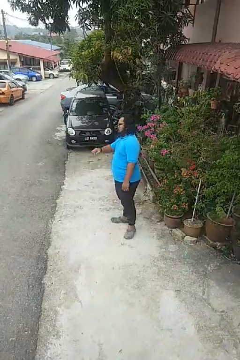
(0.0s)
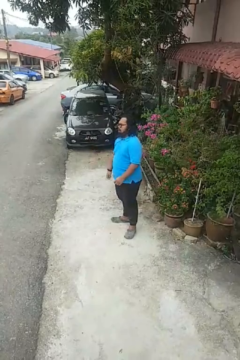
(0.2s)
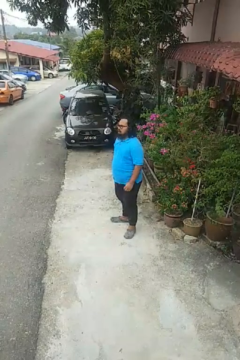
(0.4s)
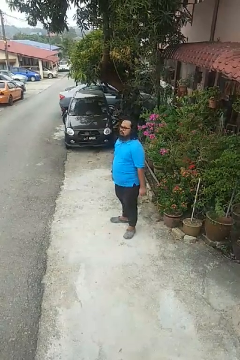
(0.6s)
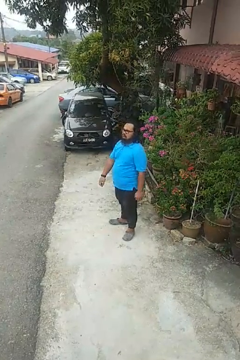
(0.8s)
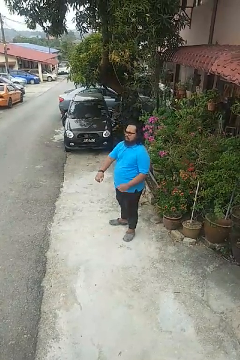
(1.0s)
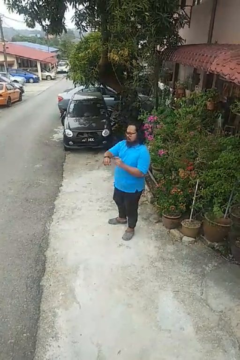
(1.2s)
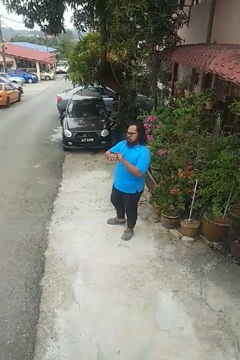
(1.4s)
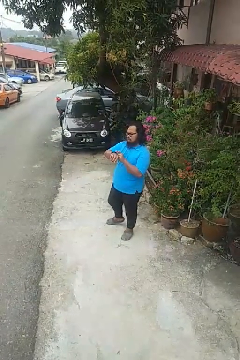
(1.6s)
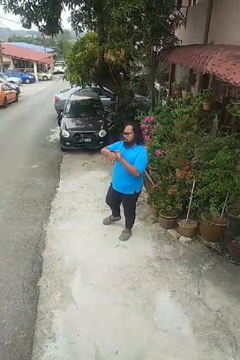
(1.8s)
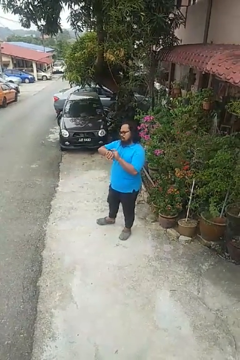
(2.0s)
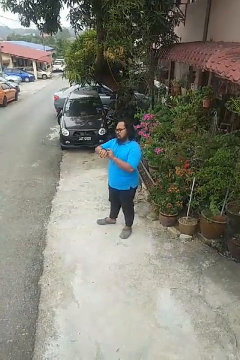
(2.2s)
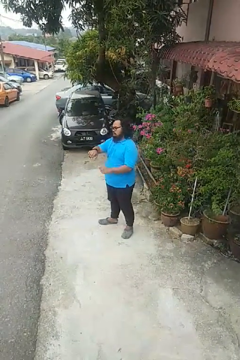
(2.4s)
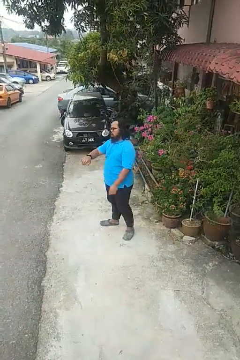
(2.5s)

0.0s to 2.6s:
person looks at wristwatch

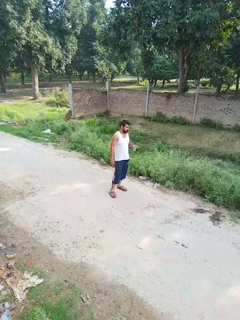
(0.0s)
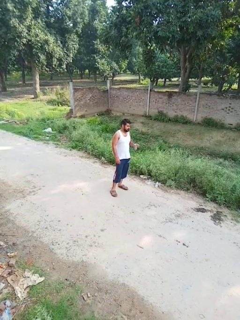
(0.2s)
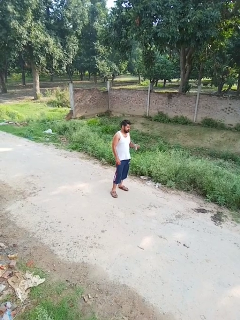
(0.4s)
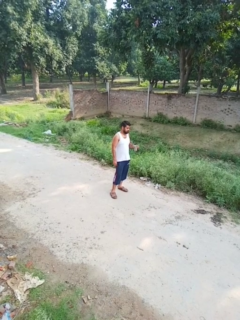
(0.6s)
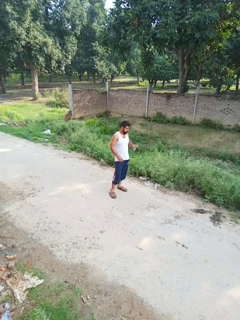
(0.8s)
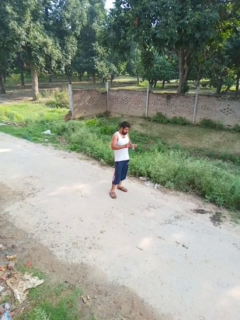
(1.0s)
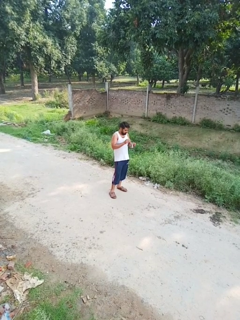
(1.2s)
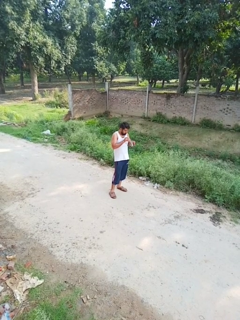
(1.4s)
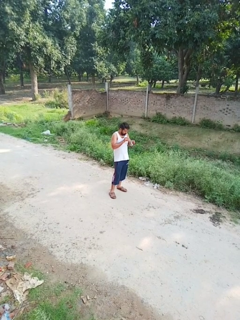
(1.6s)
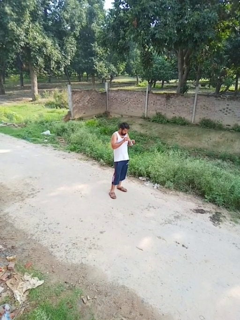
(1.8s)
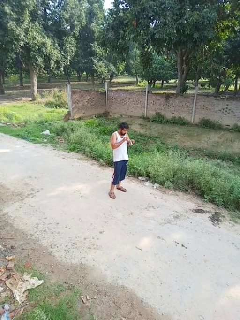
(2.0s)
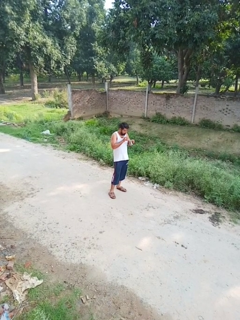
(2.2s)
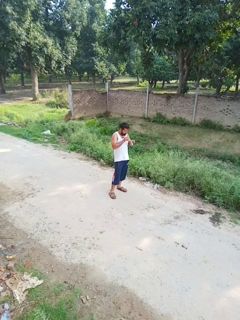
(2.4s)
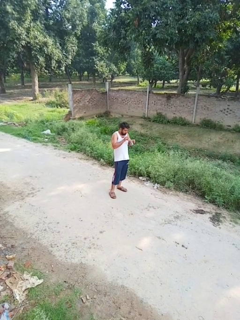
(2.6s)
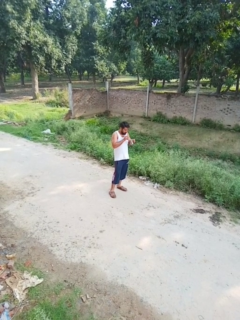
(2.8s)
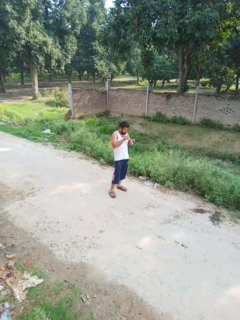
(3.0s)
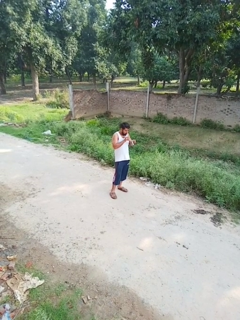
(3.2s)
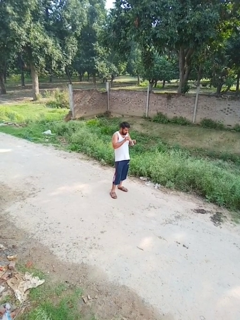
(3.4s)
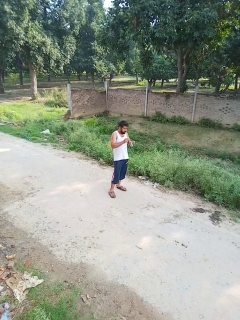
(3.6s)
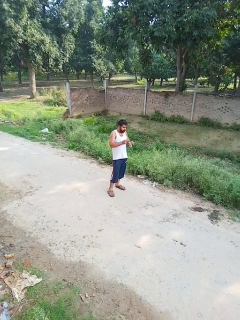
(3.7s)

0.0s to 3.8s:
person drinks from straw

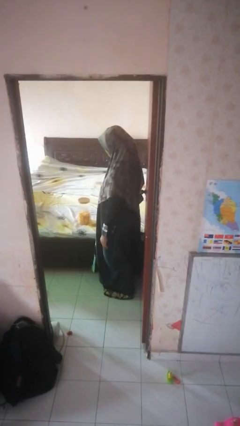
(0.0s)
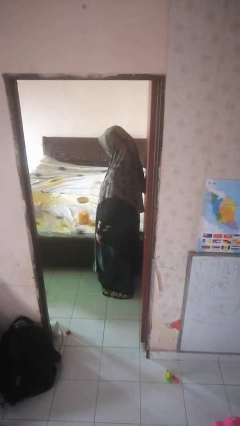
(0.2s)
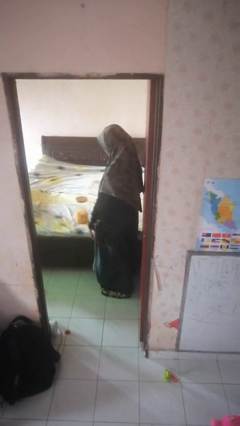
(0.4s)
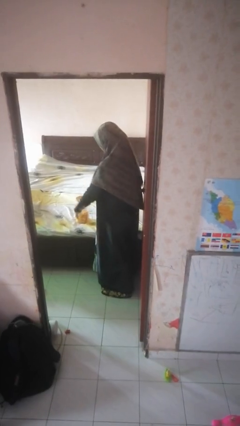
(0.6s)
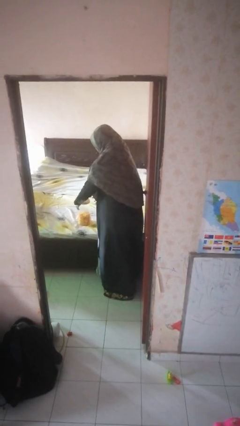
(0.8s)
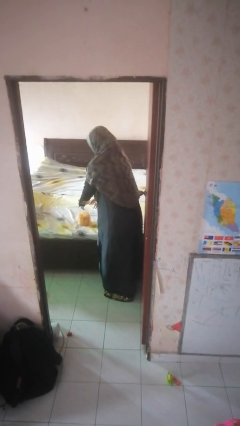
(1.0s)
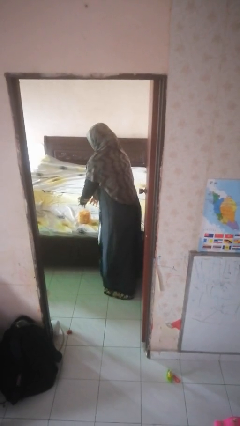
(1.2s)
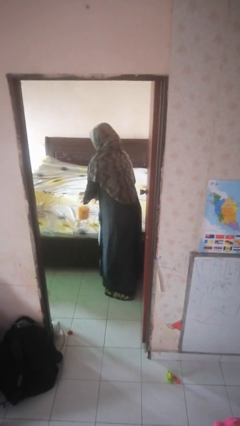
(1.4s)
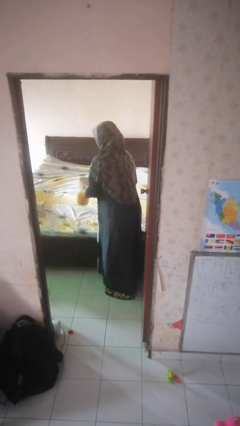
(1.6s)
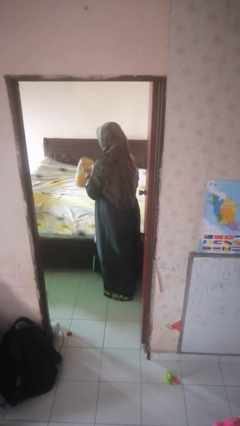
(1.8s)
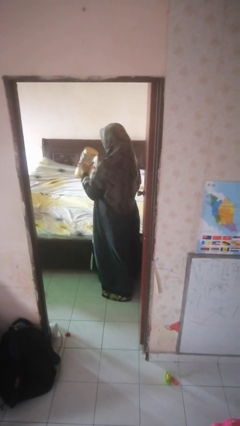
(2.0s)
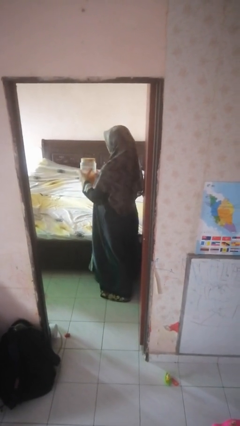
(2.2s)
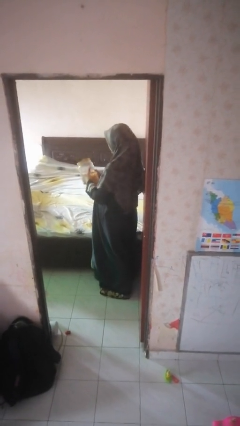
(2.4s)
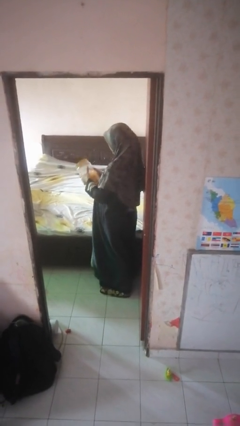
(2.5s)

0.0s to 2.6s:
person picks up object from bed

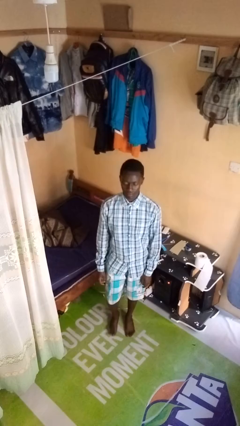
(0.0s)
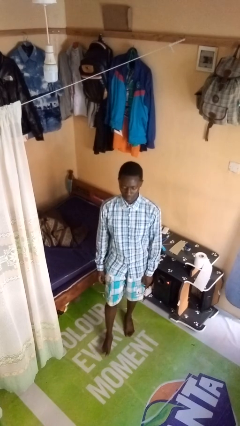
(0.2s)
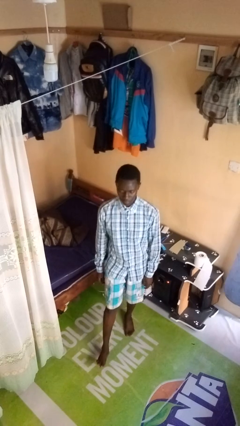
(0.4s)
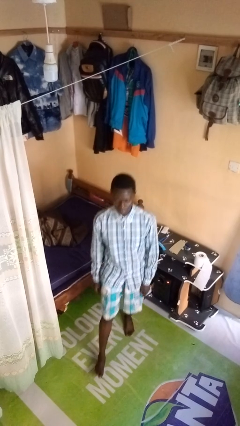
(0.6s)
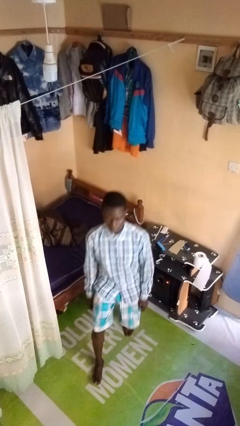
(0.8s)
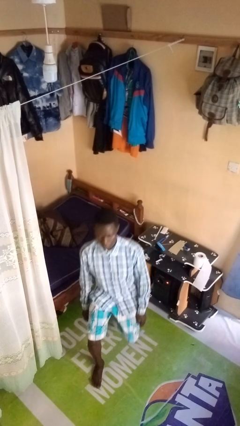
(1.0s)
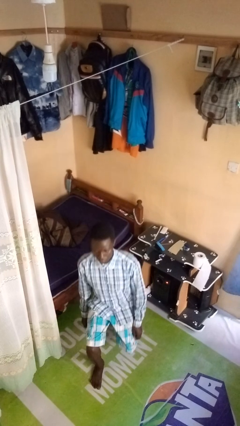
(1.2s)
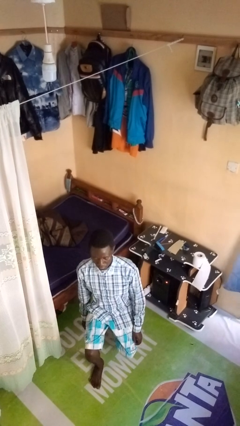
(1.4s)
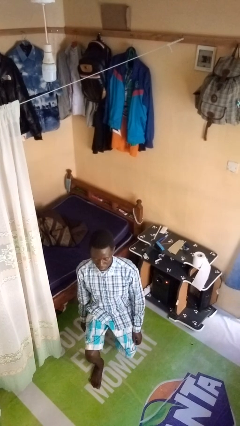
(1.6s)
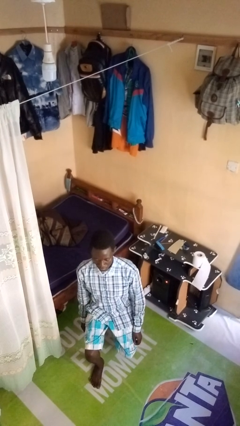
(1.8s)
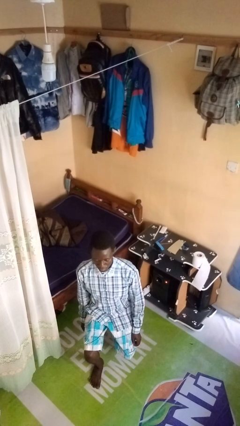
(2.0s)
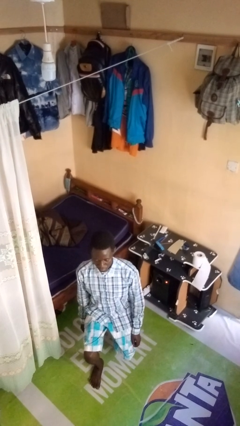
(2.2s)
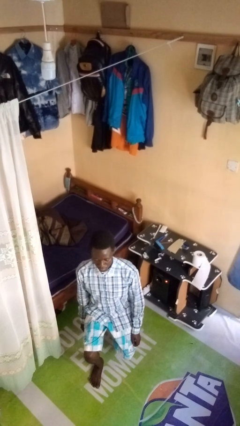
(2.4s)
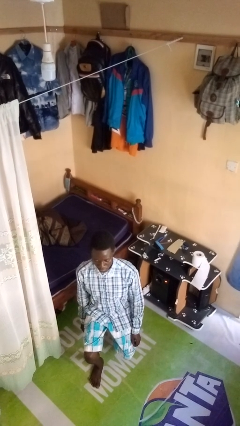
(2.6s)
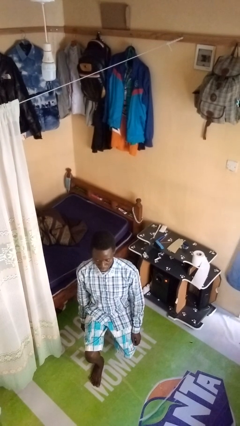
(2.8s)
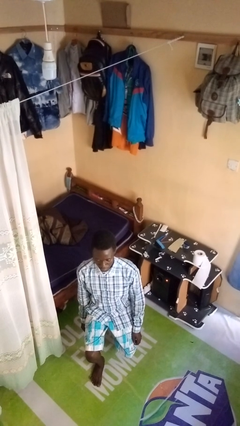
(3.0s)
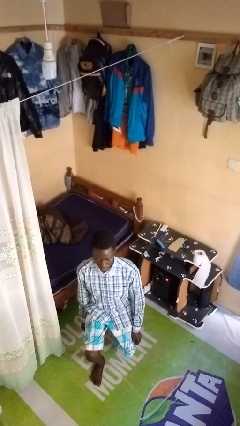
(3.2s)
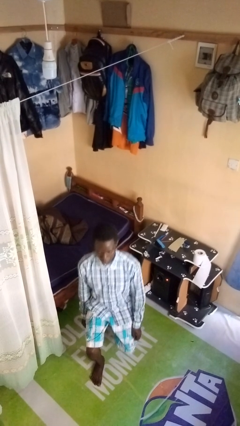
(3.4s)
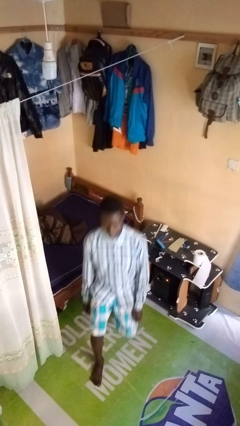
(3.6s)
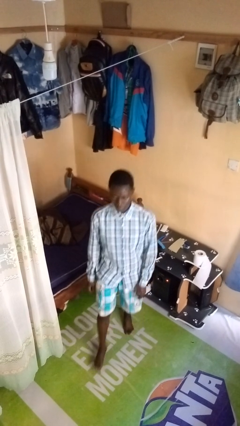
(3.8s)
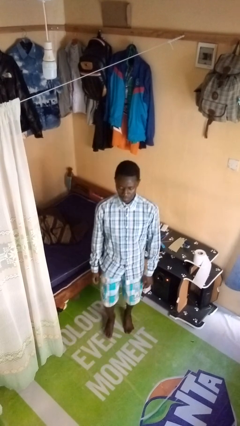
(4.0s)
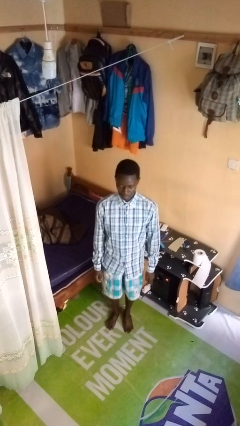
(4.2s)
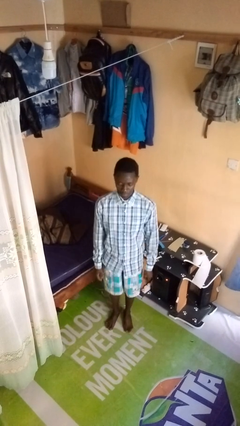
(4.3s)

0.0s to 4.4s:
person exercises with lunges

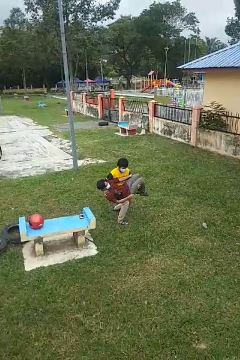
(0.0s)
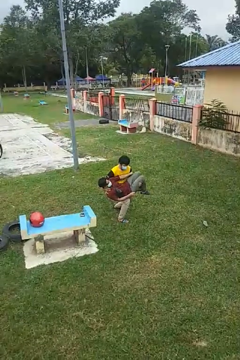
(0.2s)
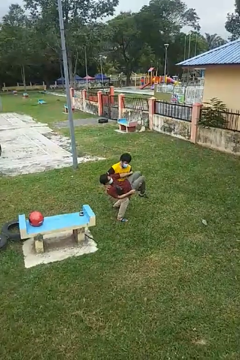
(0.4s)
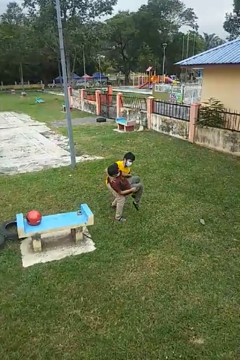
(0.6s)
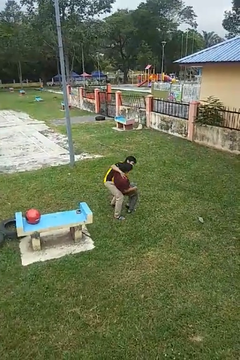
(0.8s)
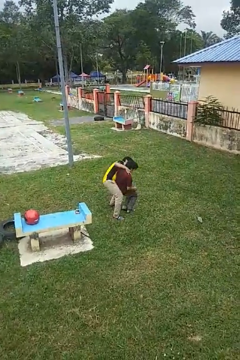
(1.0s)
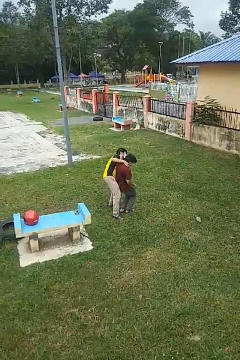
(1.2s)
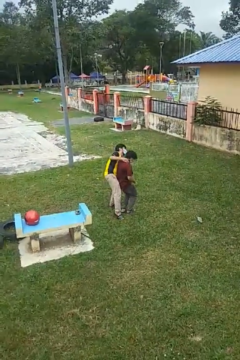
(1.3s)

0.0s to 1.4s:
person puts down person

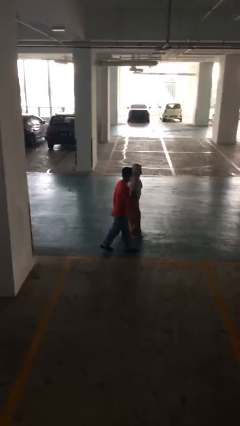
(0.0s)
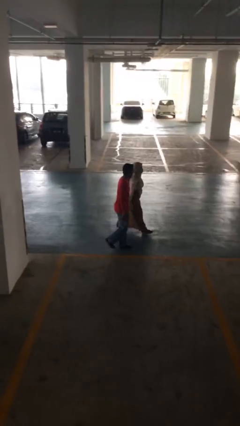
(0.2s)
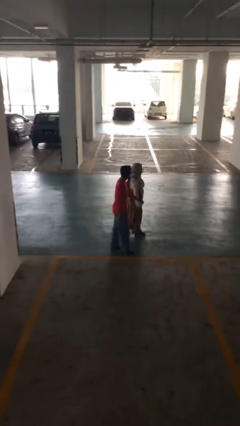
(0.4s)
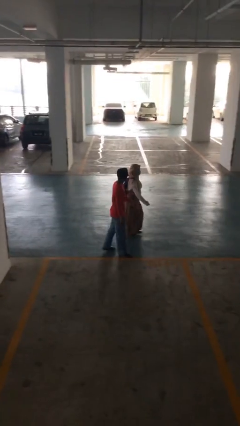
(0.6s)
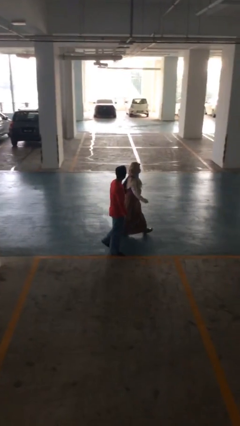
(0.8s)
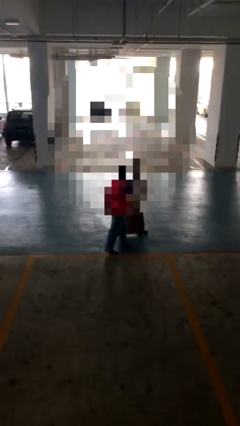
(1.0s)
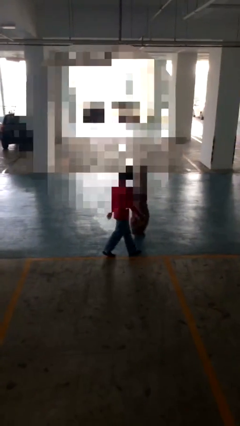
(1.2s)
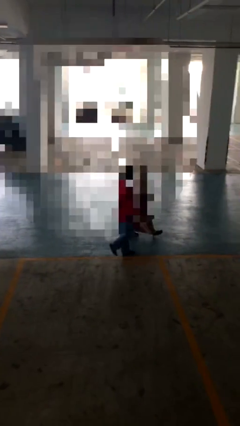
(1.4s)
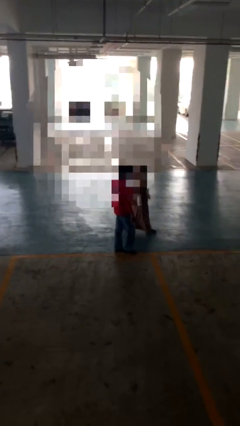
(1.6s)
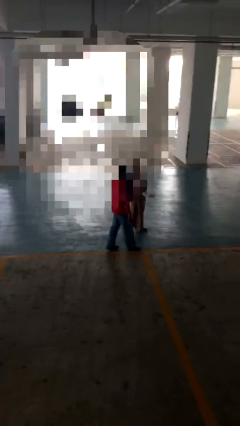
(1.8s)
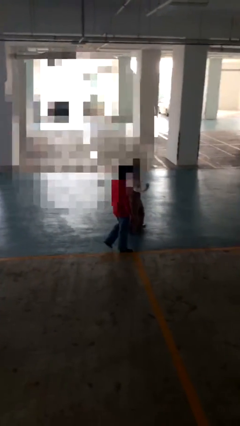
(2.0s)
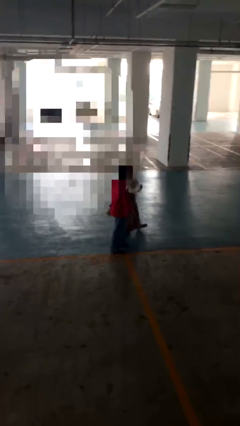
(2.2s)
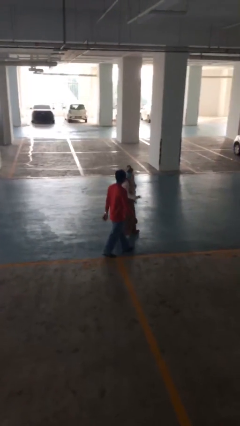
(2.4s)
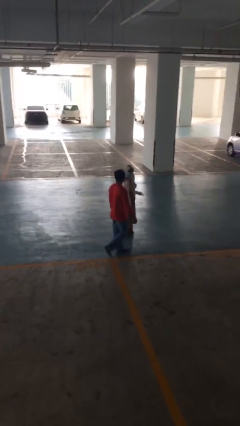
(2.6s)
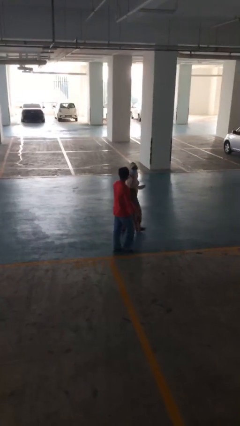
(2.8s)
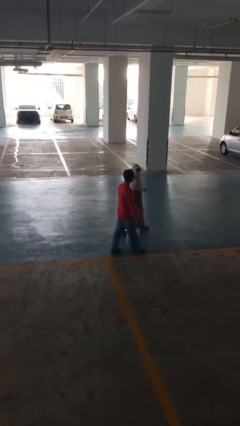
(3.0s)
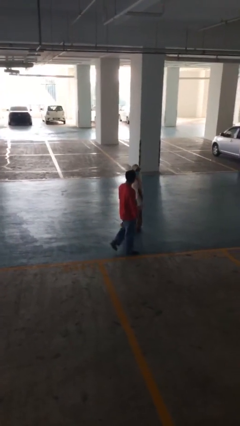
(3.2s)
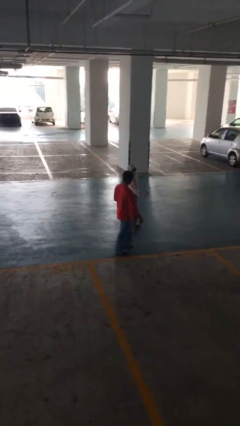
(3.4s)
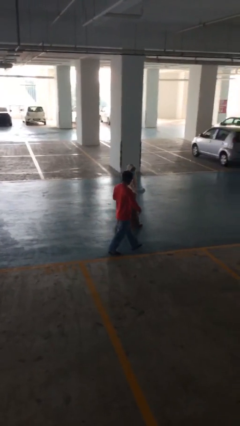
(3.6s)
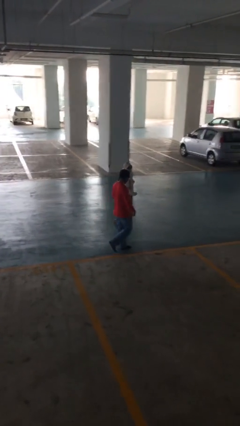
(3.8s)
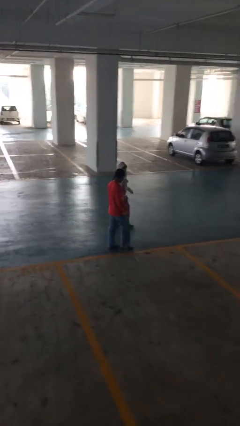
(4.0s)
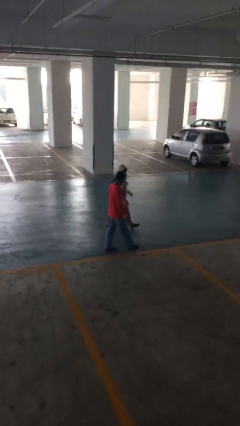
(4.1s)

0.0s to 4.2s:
person talks to person
